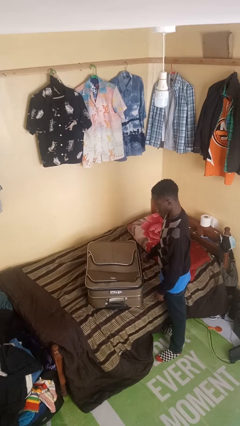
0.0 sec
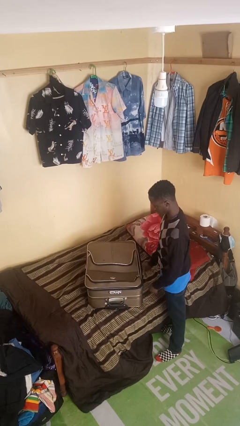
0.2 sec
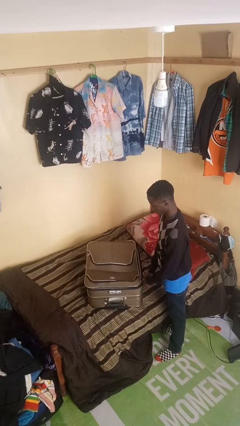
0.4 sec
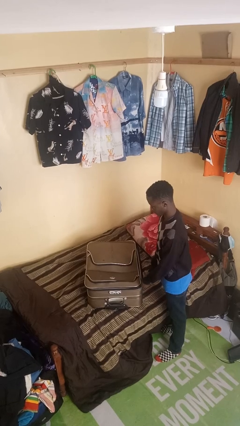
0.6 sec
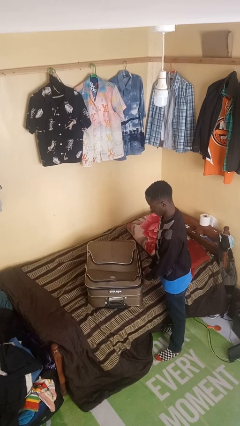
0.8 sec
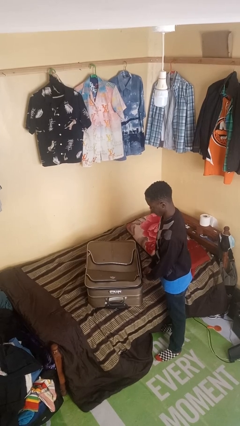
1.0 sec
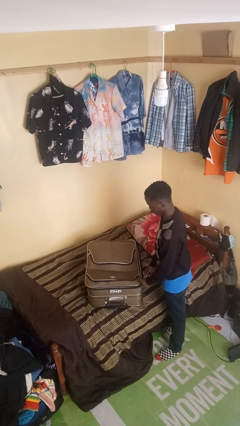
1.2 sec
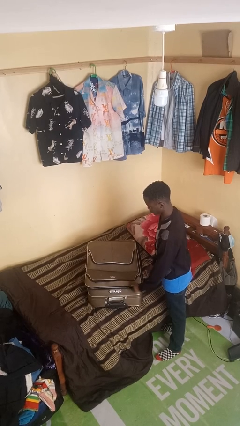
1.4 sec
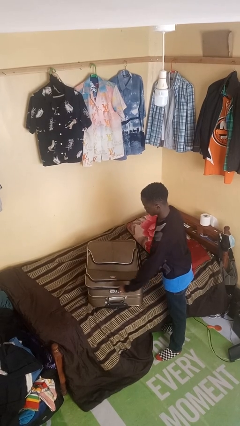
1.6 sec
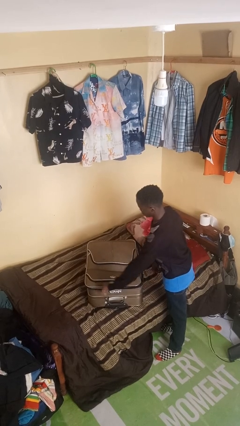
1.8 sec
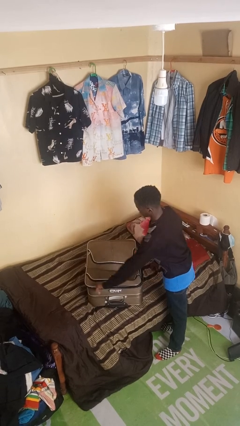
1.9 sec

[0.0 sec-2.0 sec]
person opens suitcase

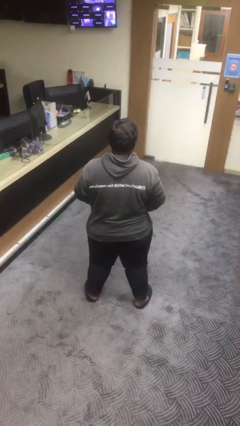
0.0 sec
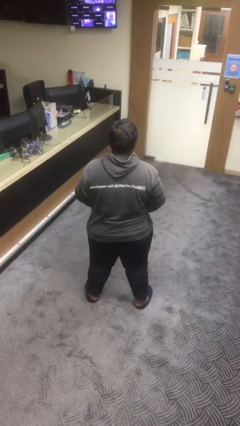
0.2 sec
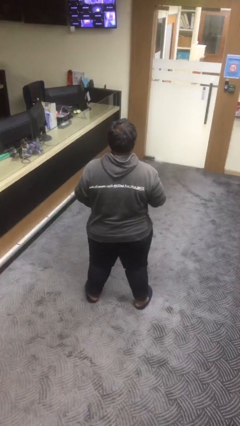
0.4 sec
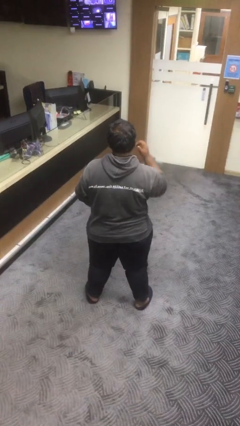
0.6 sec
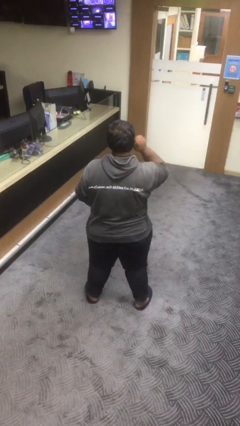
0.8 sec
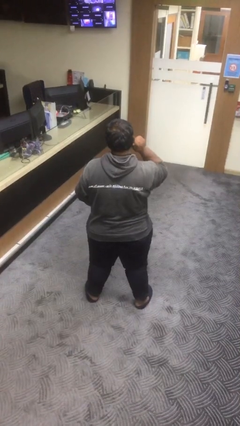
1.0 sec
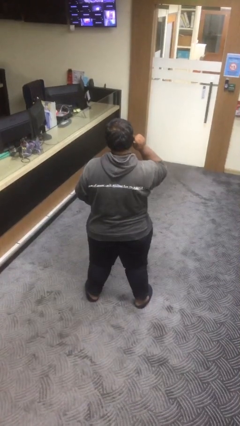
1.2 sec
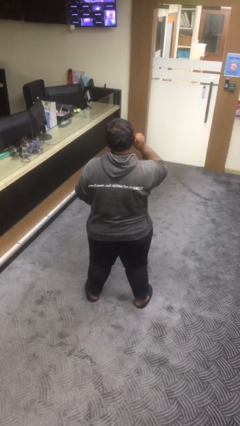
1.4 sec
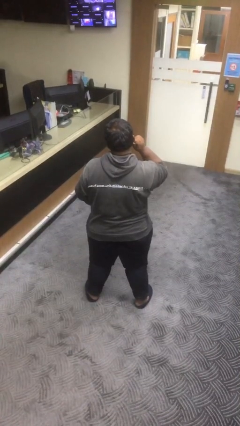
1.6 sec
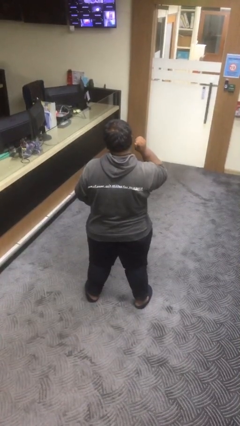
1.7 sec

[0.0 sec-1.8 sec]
person touches earlobe

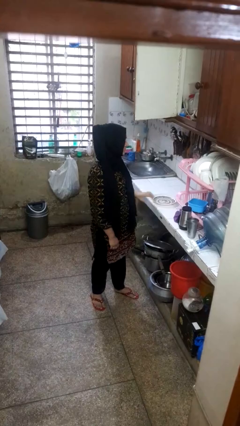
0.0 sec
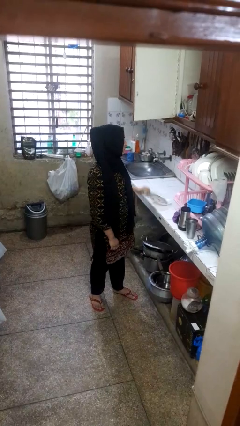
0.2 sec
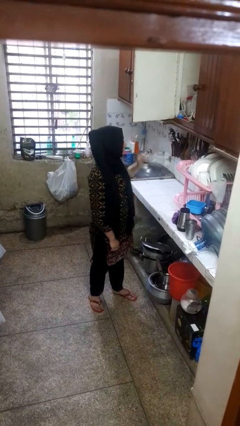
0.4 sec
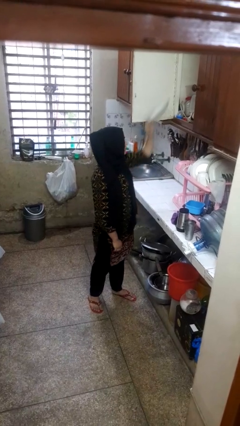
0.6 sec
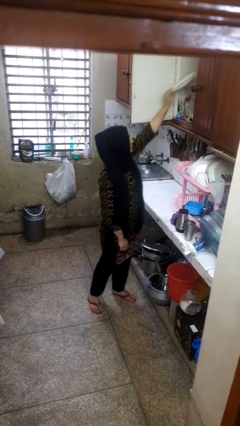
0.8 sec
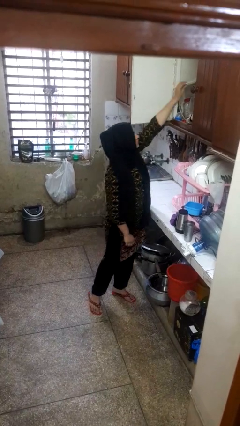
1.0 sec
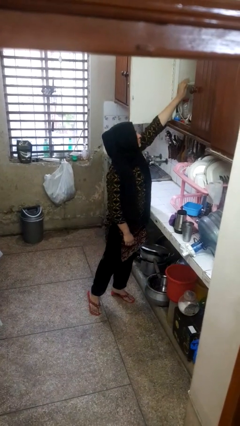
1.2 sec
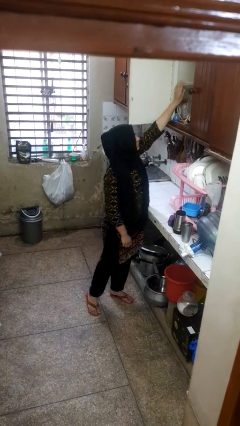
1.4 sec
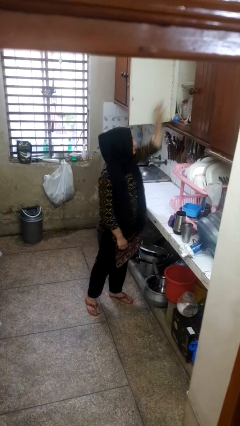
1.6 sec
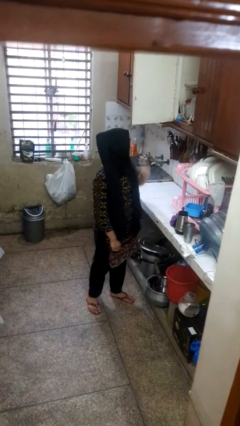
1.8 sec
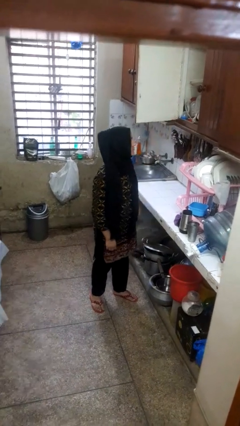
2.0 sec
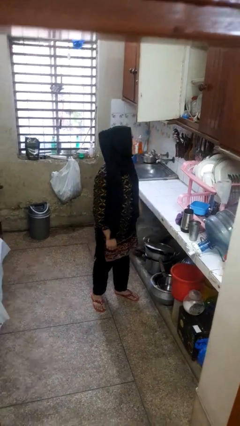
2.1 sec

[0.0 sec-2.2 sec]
person puts object in cabinet

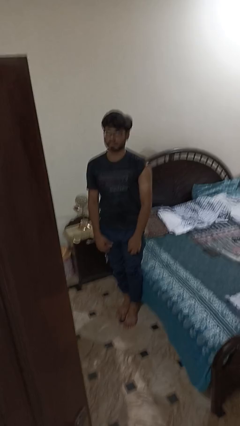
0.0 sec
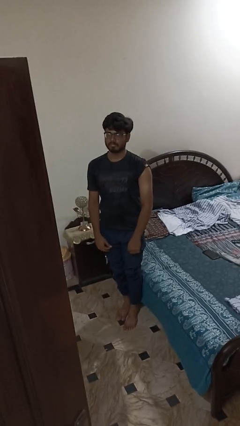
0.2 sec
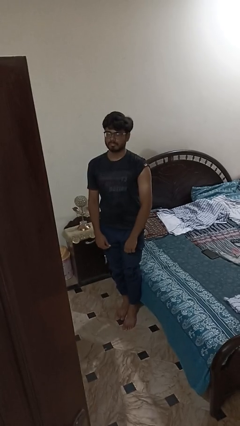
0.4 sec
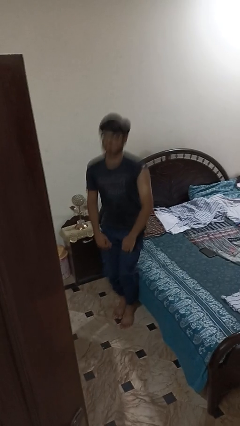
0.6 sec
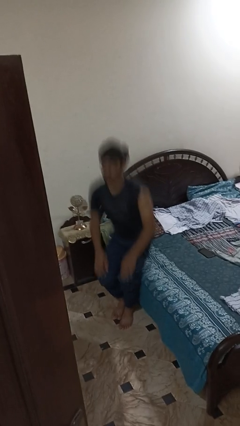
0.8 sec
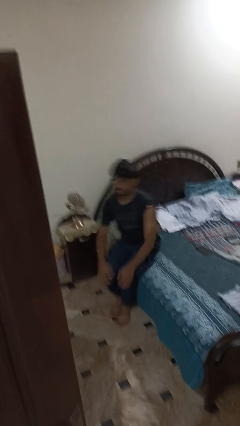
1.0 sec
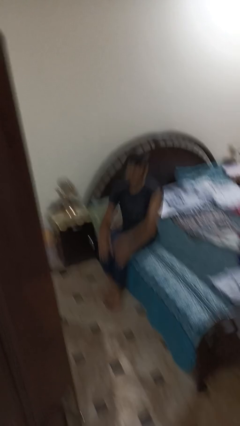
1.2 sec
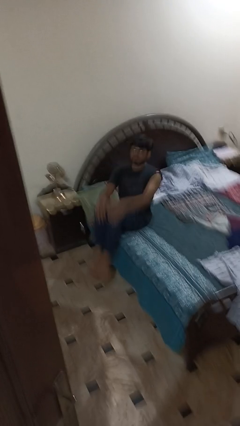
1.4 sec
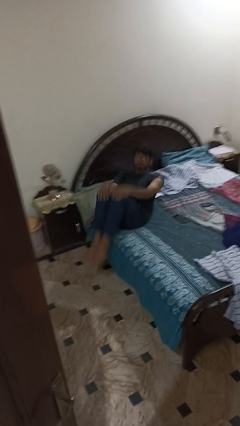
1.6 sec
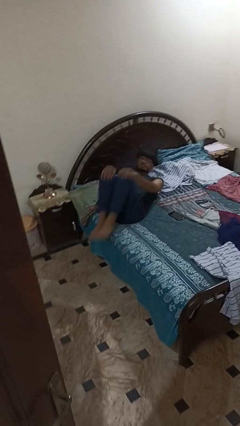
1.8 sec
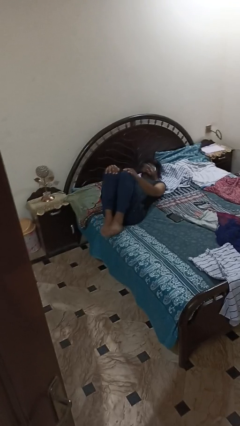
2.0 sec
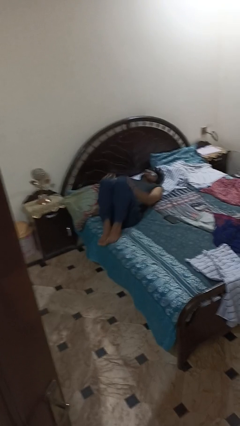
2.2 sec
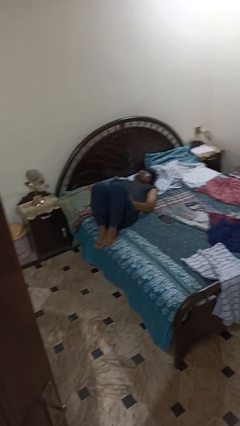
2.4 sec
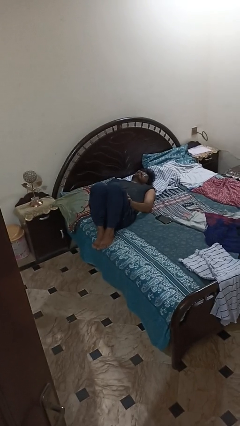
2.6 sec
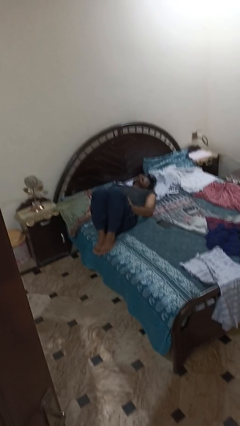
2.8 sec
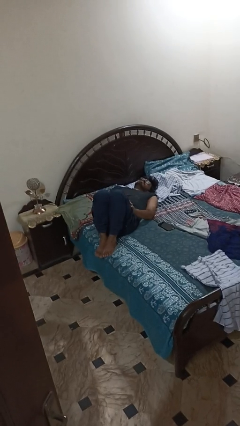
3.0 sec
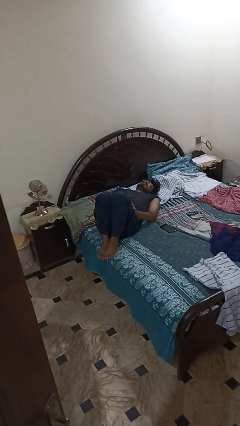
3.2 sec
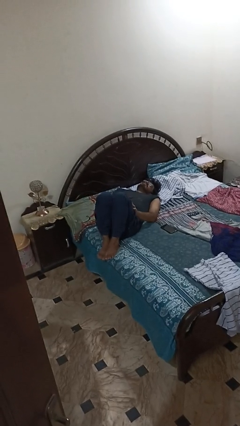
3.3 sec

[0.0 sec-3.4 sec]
person lies down on bed

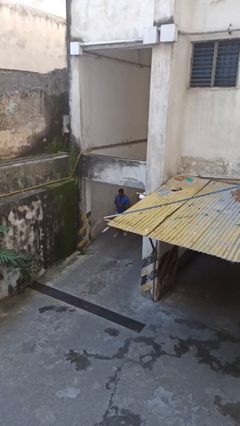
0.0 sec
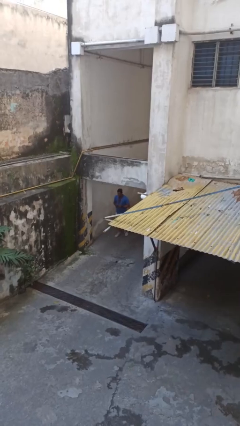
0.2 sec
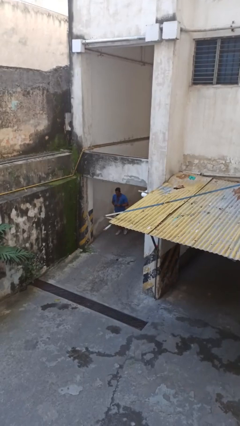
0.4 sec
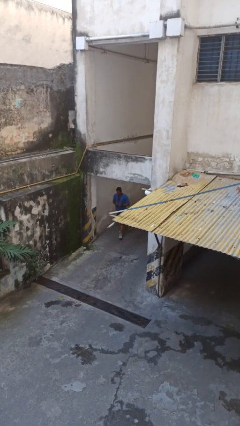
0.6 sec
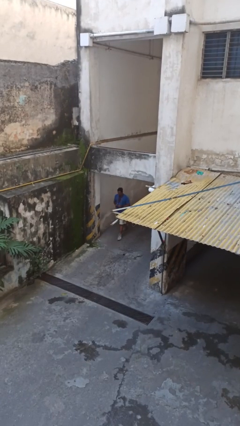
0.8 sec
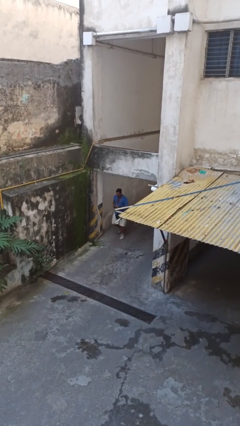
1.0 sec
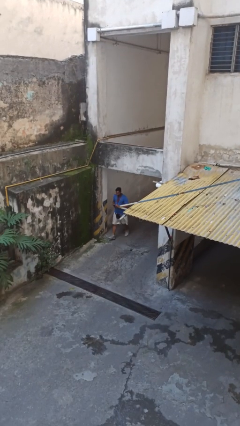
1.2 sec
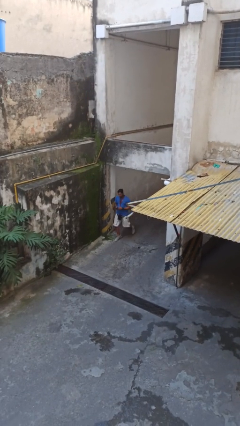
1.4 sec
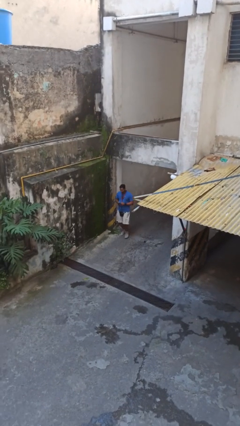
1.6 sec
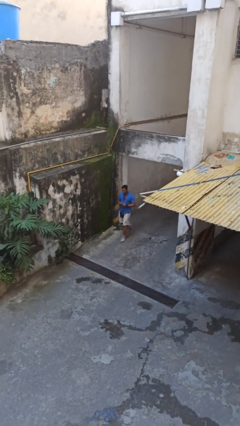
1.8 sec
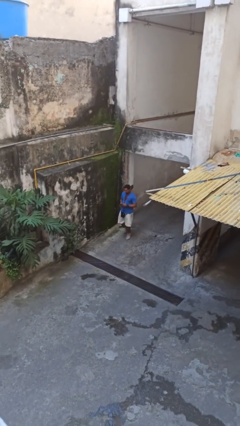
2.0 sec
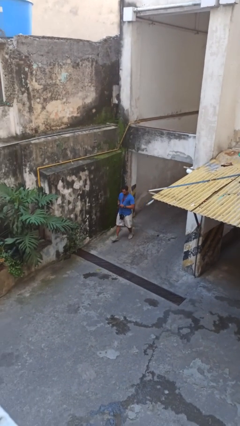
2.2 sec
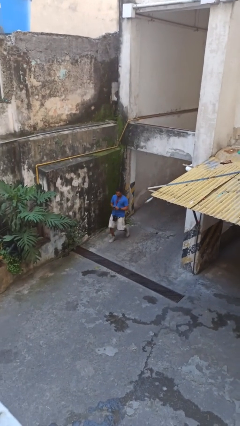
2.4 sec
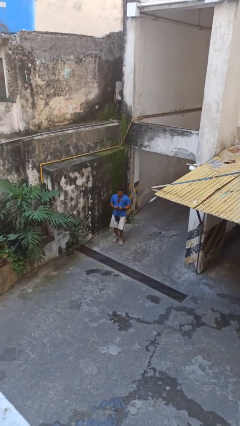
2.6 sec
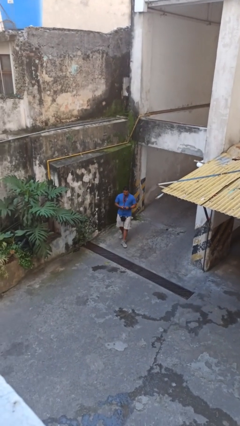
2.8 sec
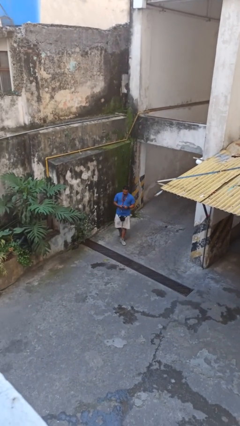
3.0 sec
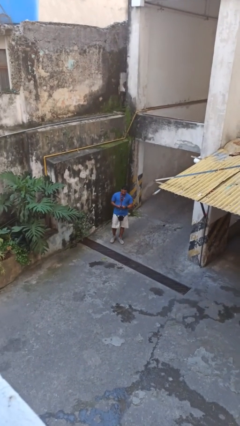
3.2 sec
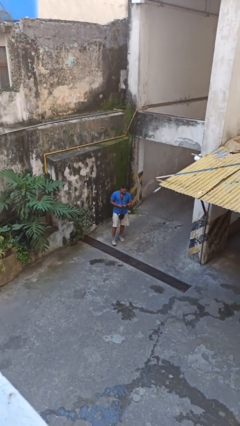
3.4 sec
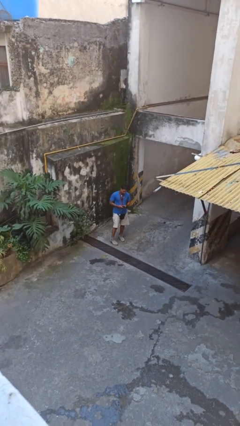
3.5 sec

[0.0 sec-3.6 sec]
person enters scene through structure

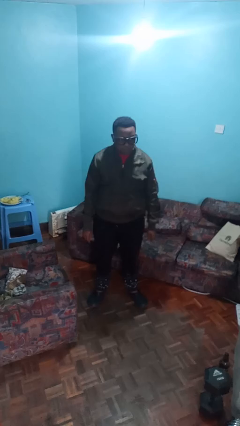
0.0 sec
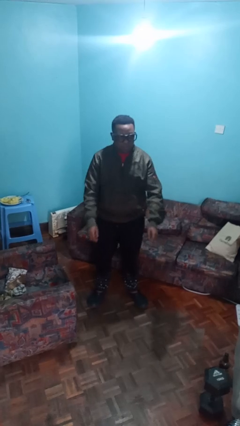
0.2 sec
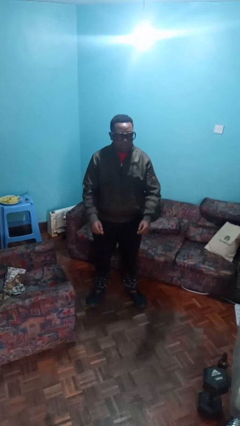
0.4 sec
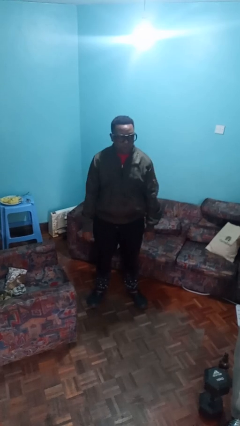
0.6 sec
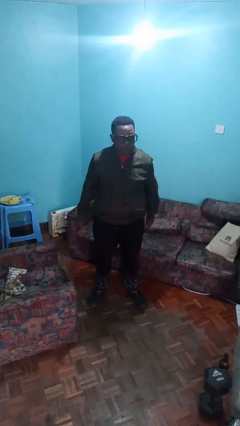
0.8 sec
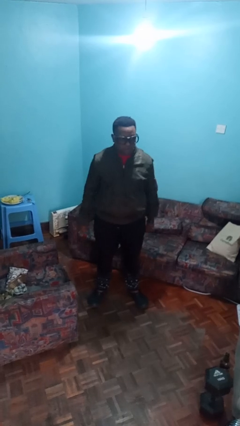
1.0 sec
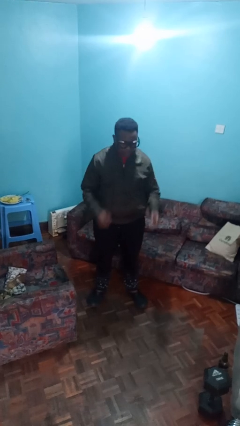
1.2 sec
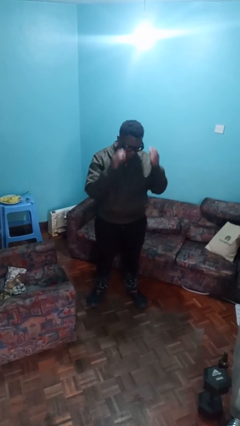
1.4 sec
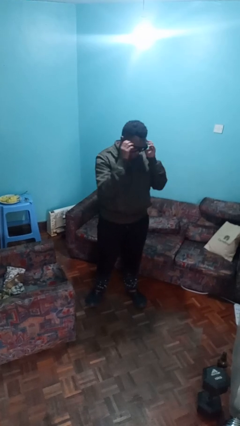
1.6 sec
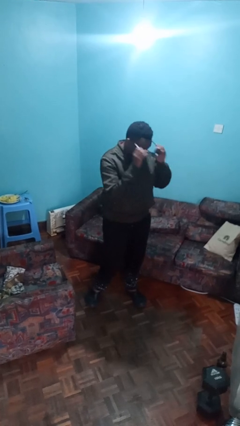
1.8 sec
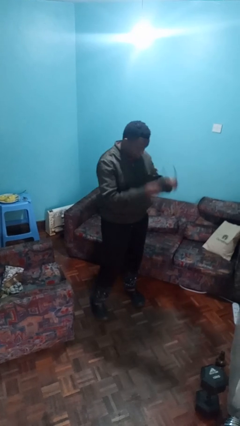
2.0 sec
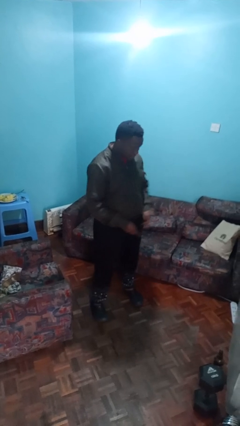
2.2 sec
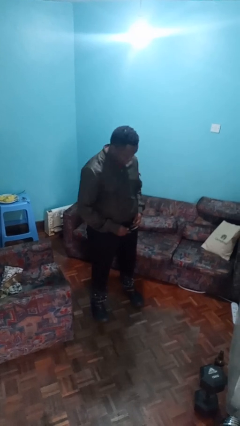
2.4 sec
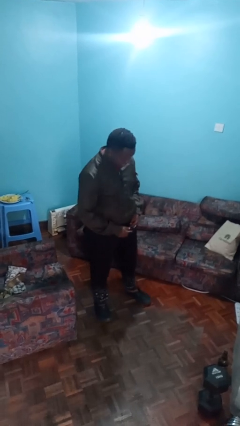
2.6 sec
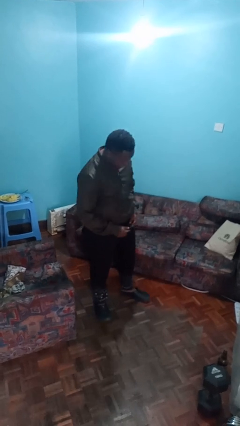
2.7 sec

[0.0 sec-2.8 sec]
person takes off glasses

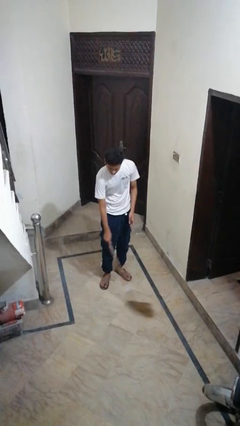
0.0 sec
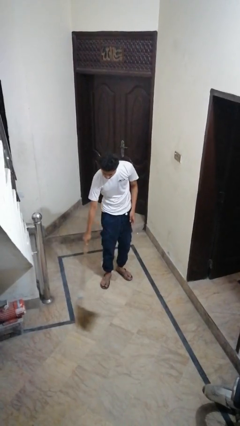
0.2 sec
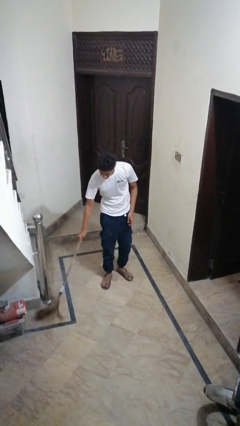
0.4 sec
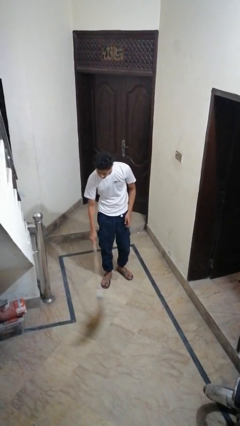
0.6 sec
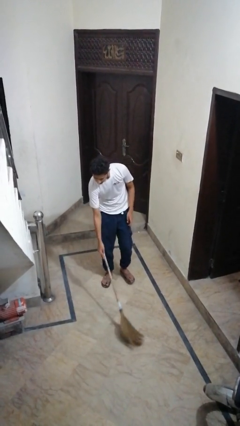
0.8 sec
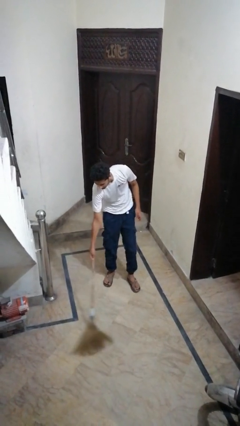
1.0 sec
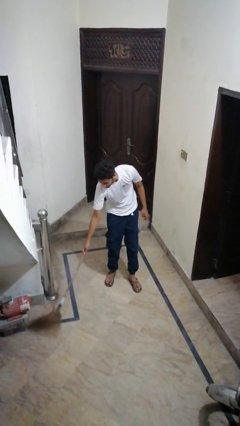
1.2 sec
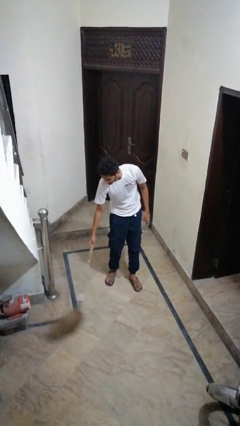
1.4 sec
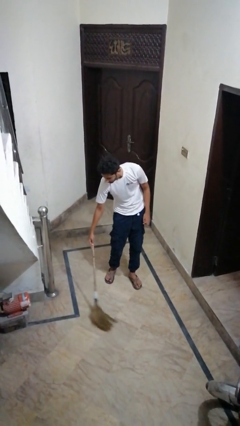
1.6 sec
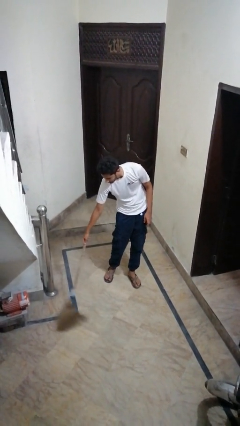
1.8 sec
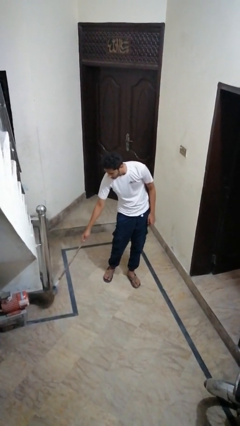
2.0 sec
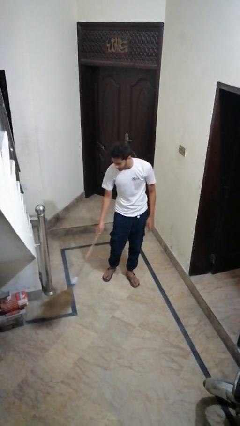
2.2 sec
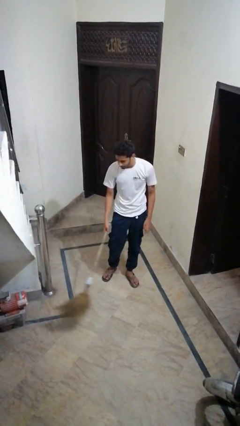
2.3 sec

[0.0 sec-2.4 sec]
person sweeps floor
